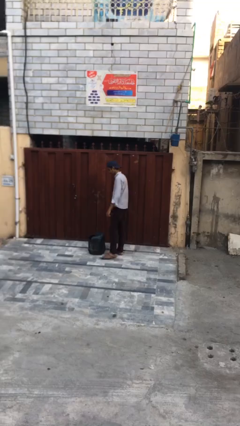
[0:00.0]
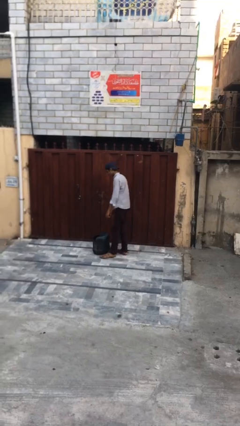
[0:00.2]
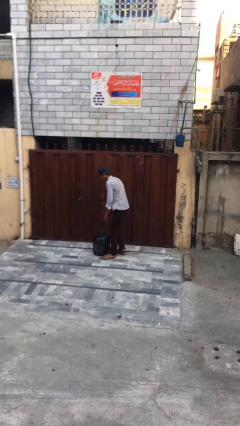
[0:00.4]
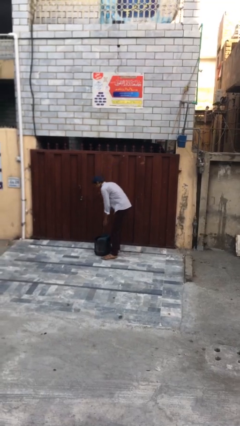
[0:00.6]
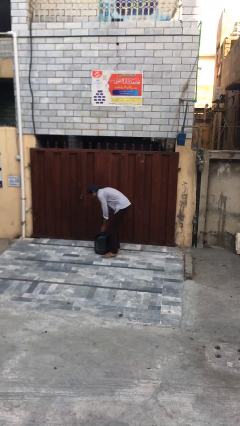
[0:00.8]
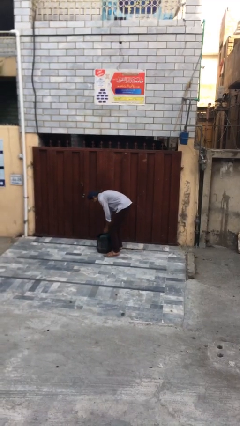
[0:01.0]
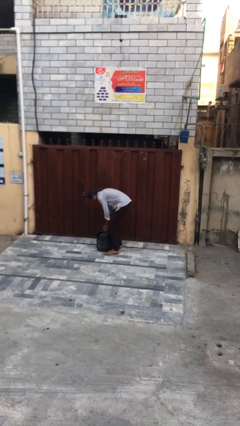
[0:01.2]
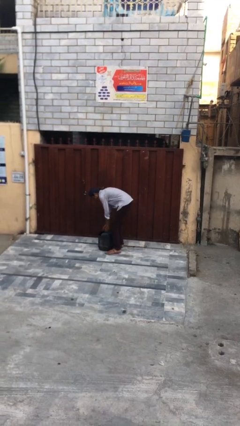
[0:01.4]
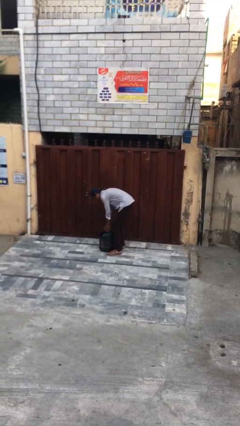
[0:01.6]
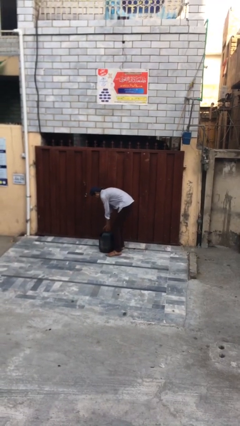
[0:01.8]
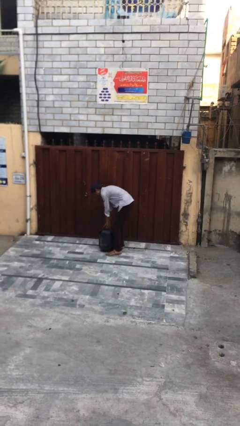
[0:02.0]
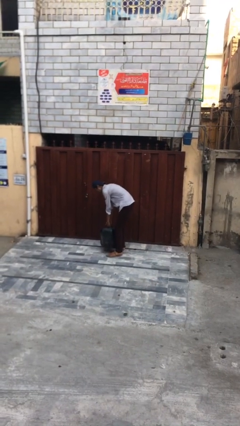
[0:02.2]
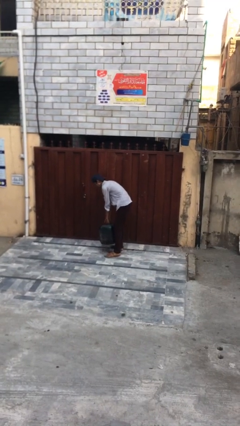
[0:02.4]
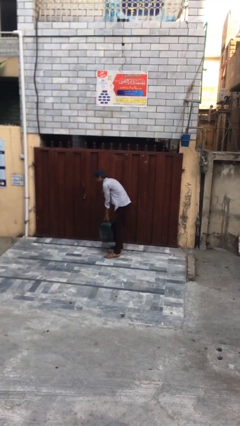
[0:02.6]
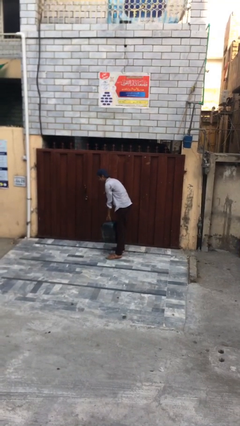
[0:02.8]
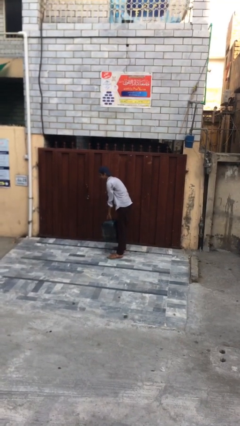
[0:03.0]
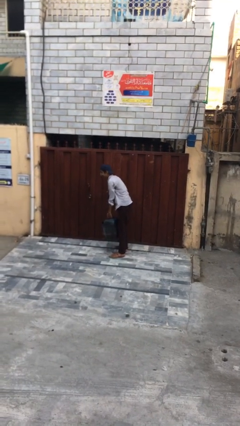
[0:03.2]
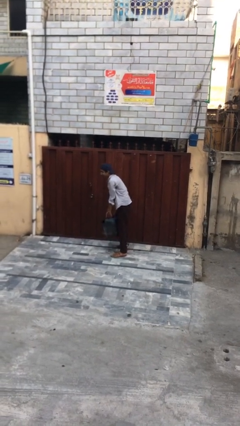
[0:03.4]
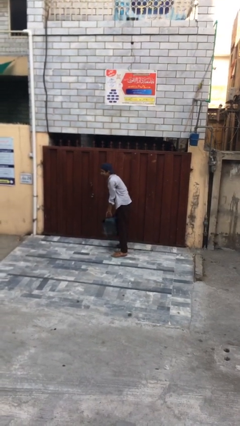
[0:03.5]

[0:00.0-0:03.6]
person picks up object from floor

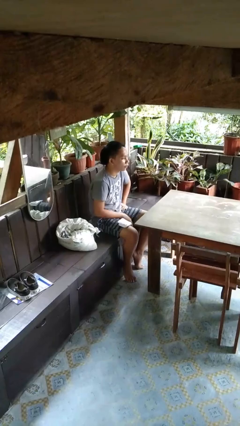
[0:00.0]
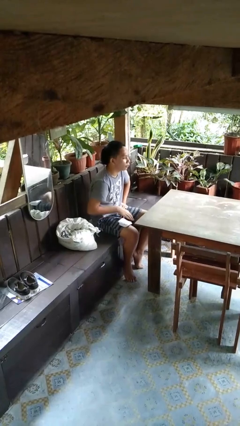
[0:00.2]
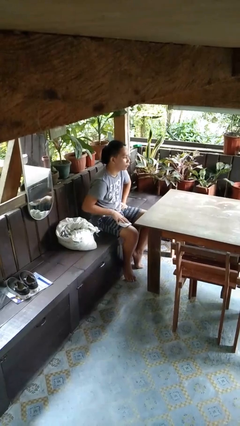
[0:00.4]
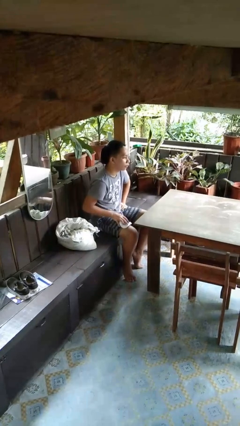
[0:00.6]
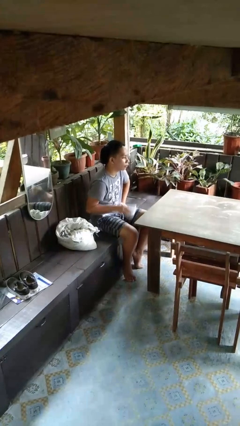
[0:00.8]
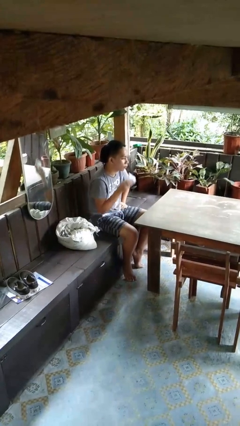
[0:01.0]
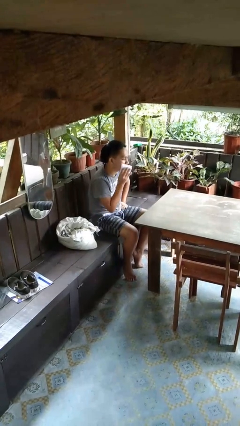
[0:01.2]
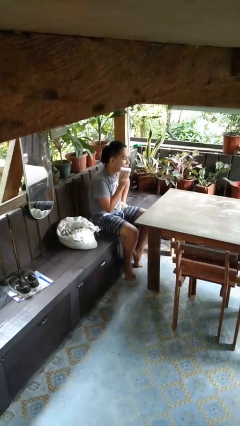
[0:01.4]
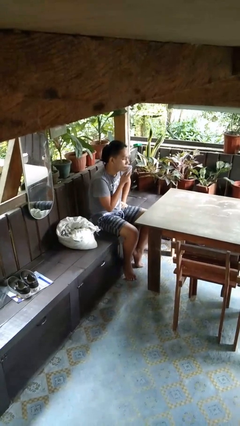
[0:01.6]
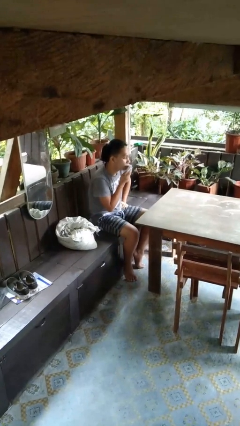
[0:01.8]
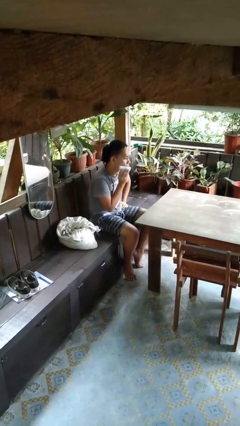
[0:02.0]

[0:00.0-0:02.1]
person wipes mouth with napkin

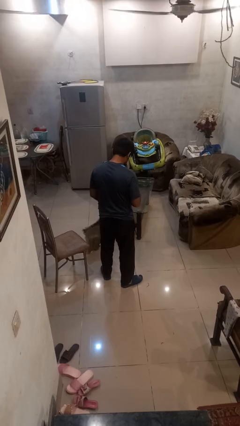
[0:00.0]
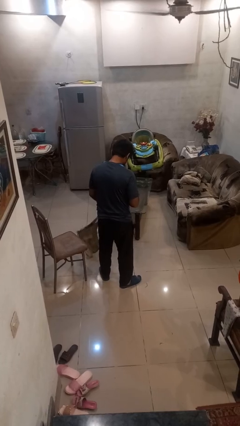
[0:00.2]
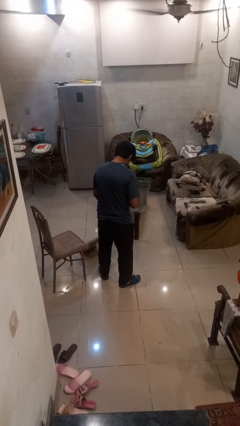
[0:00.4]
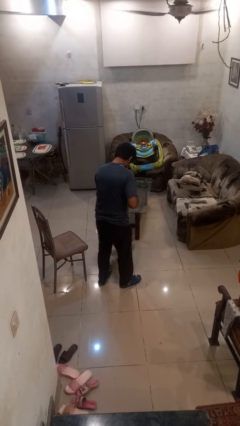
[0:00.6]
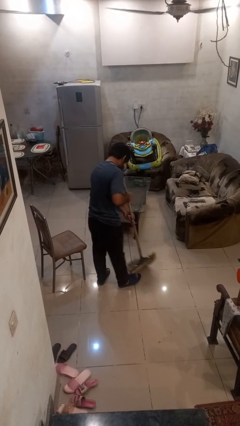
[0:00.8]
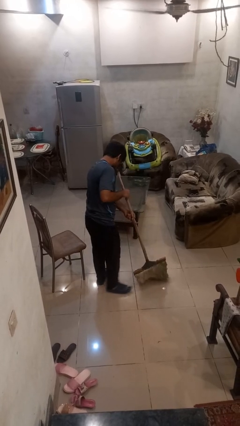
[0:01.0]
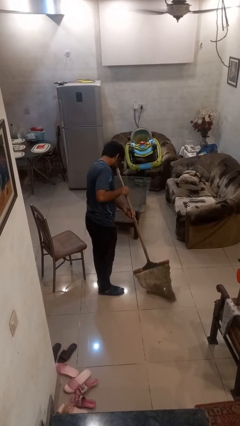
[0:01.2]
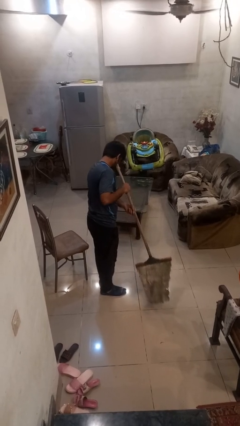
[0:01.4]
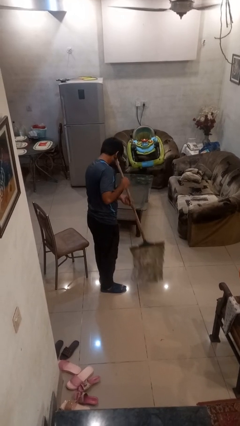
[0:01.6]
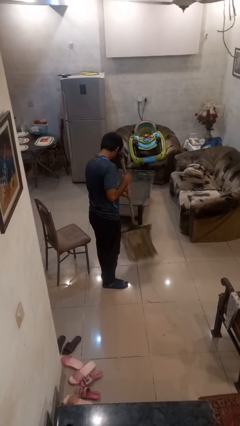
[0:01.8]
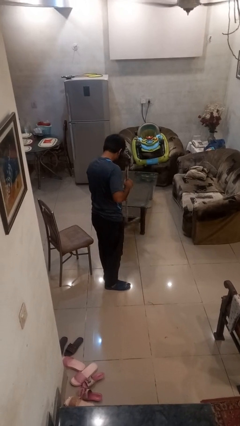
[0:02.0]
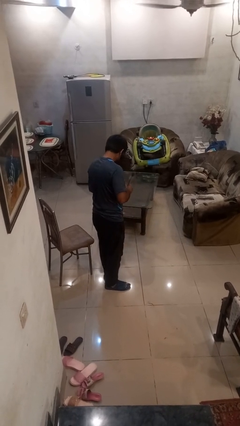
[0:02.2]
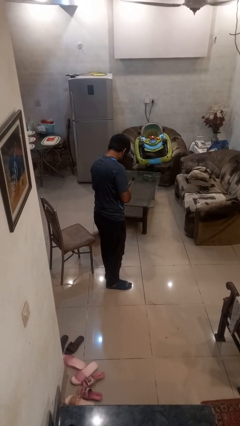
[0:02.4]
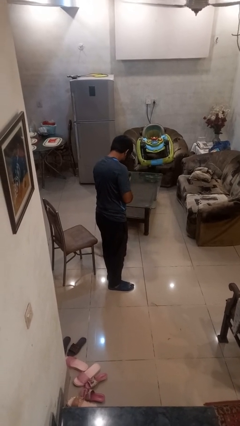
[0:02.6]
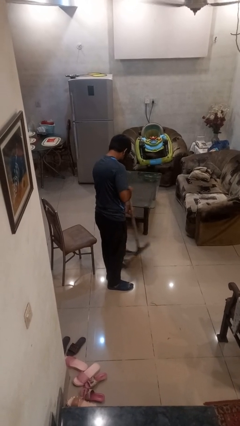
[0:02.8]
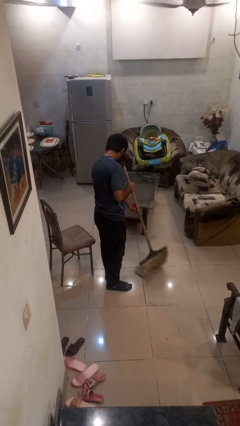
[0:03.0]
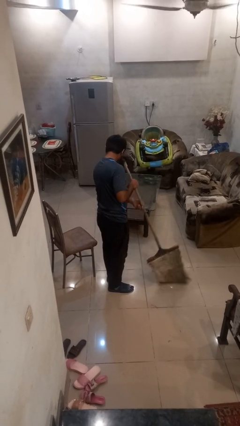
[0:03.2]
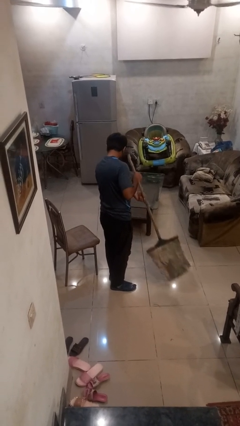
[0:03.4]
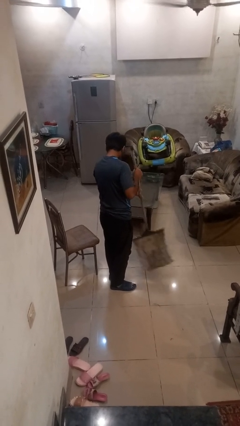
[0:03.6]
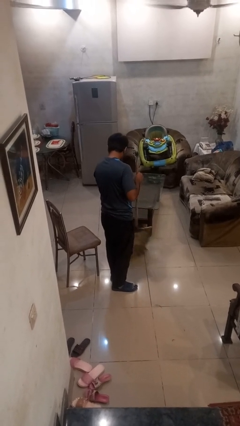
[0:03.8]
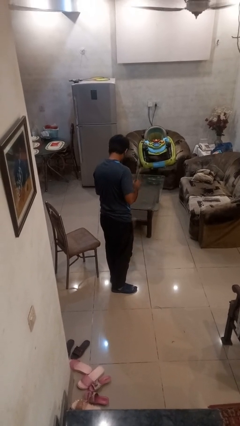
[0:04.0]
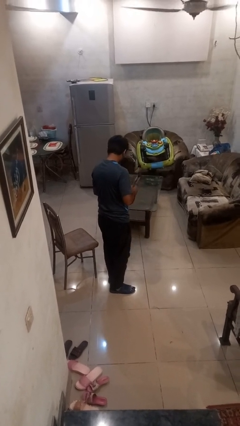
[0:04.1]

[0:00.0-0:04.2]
person mops

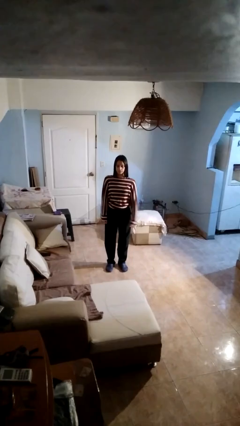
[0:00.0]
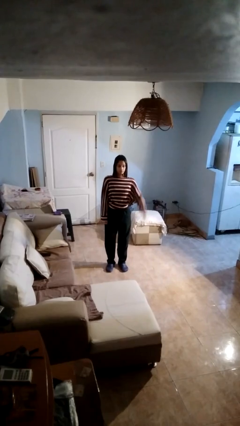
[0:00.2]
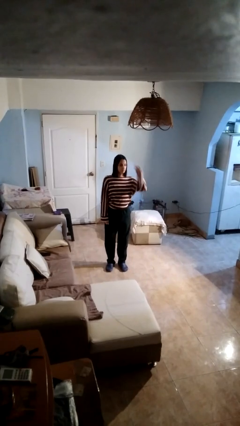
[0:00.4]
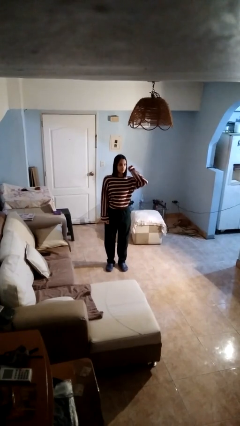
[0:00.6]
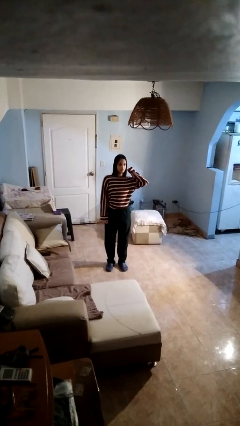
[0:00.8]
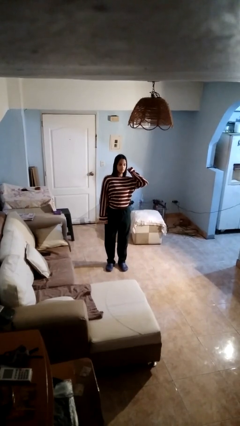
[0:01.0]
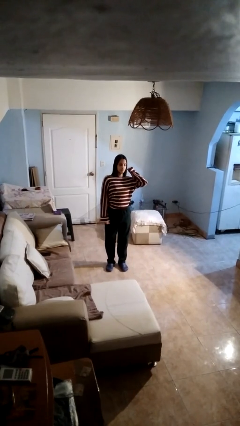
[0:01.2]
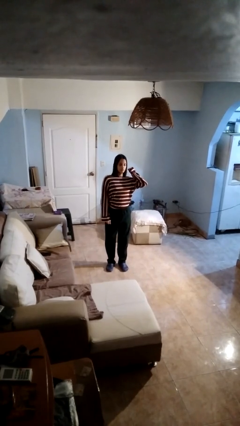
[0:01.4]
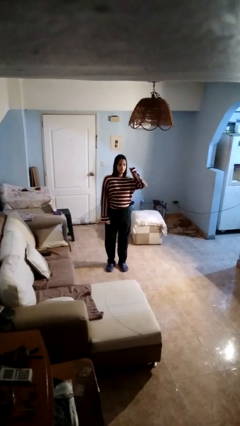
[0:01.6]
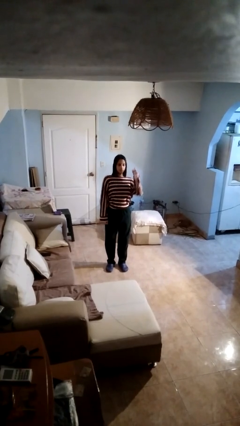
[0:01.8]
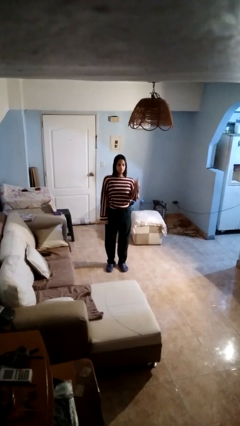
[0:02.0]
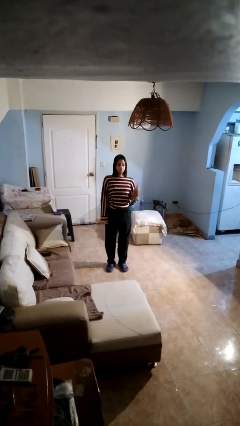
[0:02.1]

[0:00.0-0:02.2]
person gestures behind me

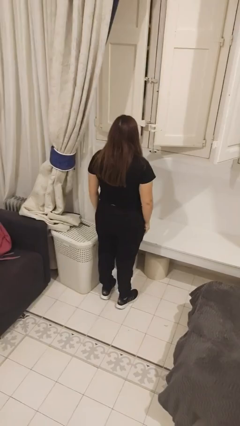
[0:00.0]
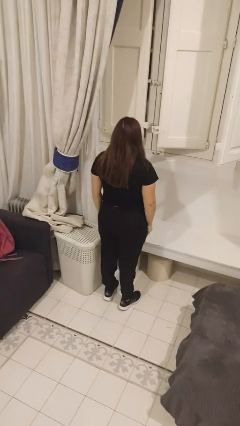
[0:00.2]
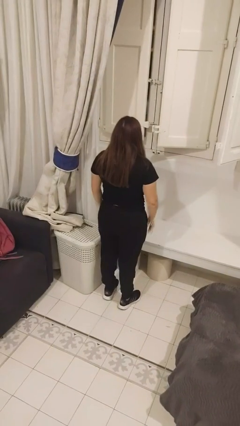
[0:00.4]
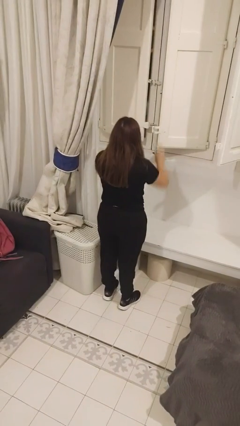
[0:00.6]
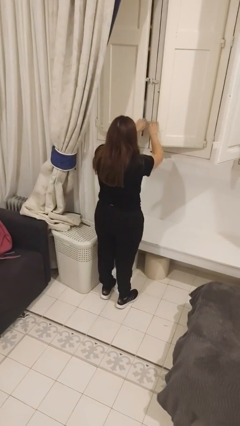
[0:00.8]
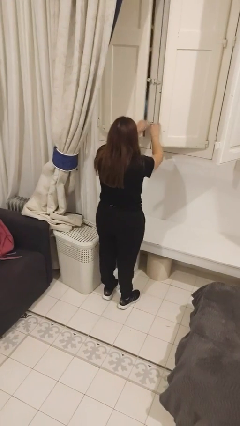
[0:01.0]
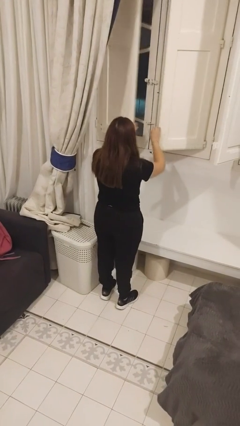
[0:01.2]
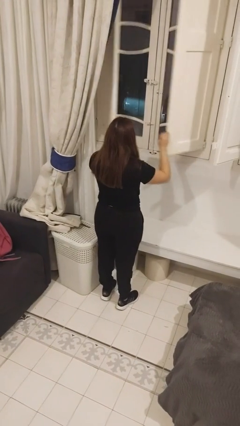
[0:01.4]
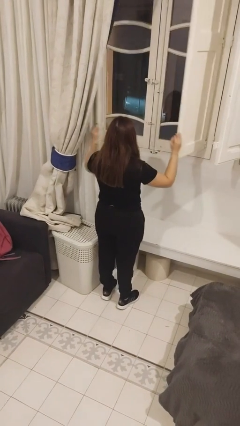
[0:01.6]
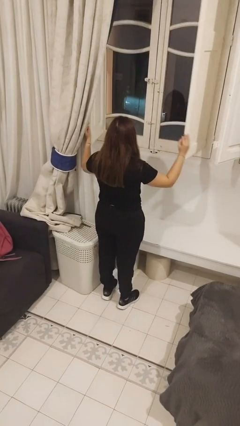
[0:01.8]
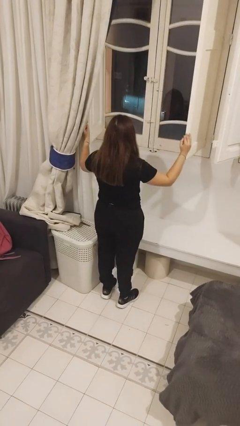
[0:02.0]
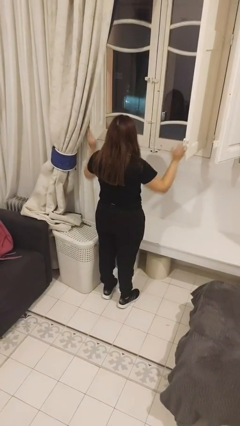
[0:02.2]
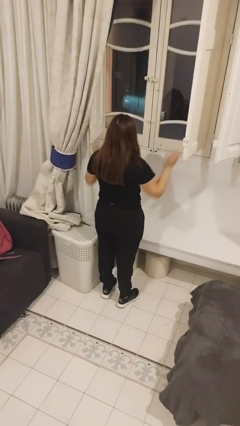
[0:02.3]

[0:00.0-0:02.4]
person opens home window

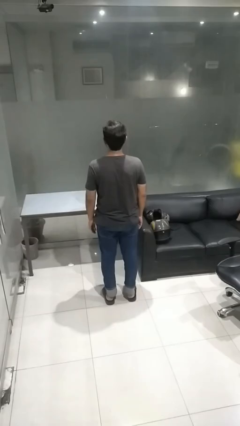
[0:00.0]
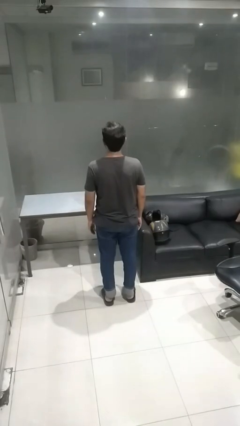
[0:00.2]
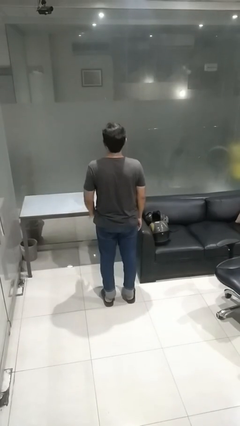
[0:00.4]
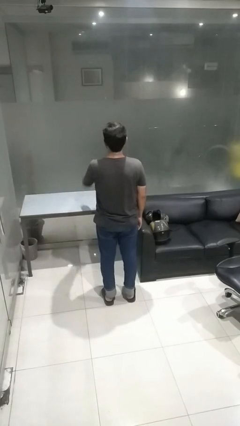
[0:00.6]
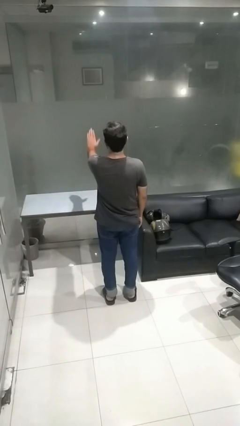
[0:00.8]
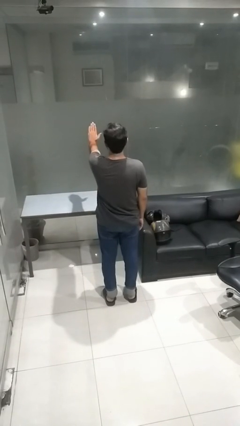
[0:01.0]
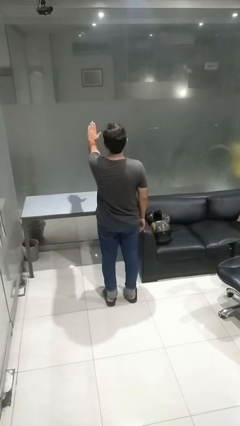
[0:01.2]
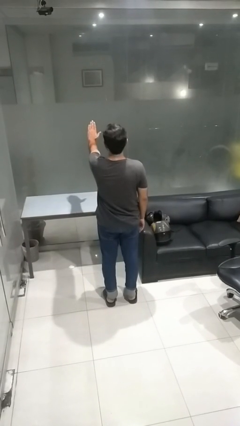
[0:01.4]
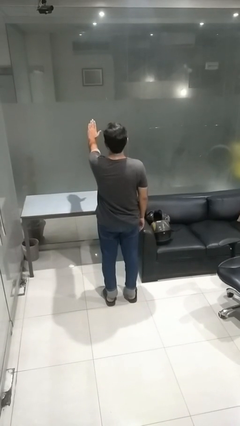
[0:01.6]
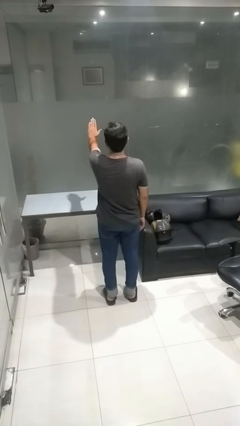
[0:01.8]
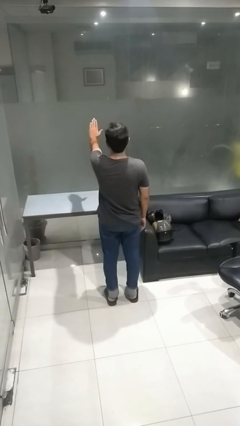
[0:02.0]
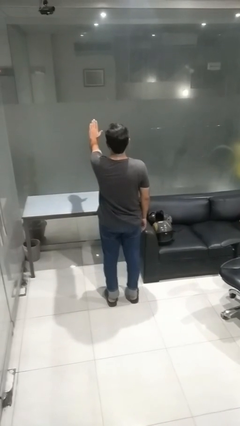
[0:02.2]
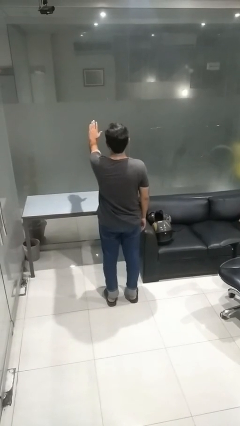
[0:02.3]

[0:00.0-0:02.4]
person gestures stop

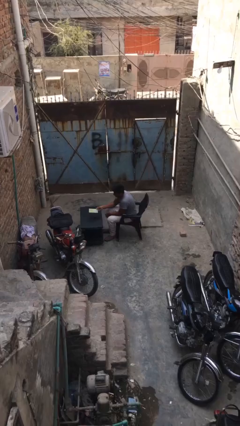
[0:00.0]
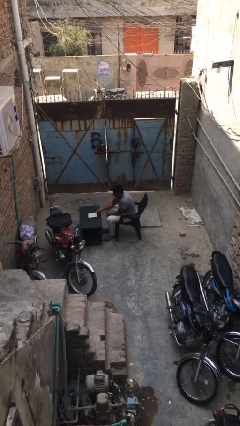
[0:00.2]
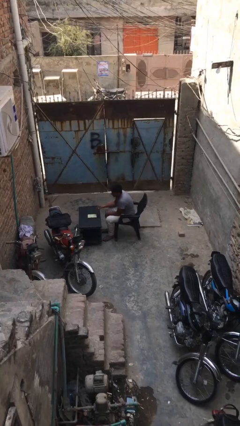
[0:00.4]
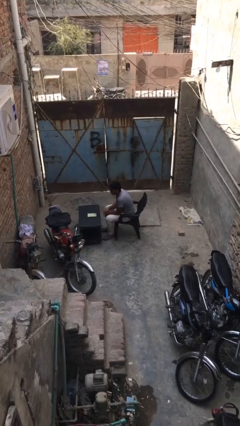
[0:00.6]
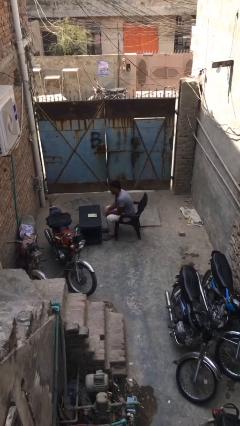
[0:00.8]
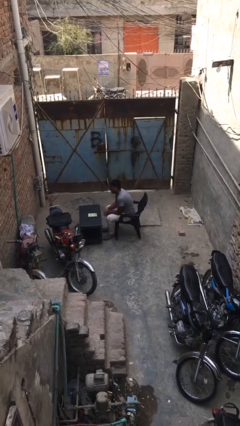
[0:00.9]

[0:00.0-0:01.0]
person puts down object on table
